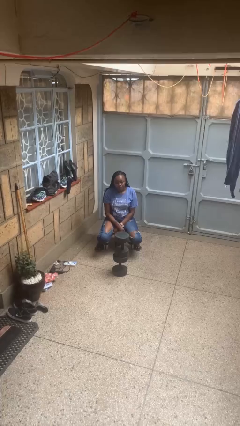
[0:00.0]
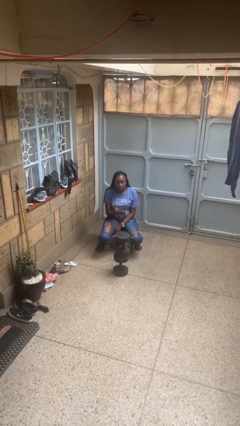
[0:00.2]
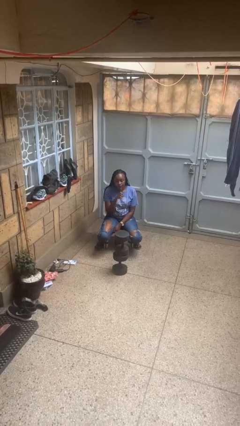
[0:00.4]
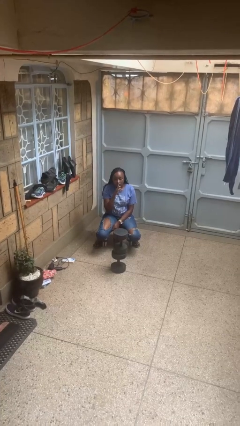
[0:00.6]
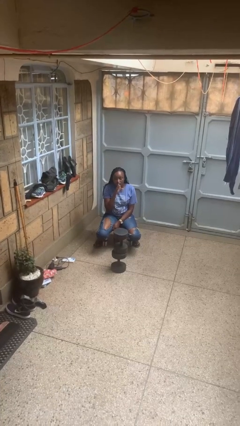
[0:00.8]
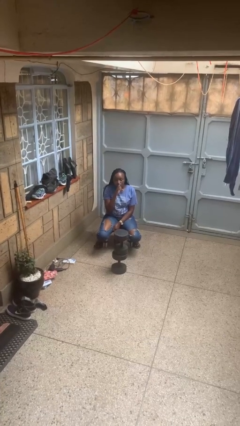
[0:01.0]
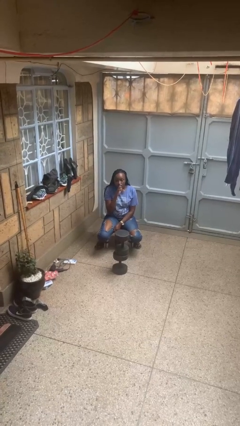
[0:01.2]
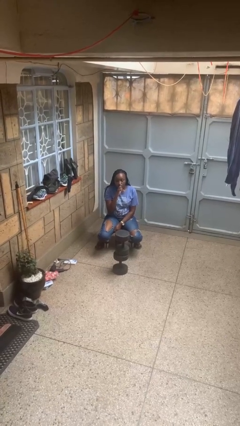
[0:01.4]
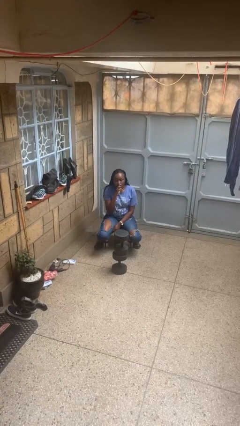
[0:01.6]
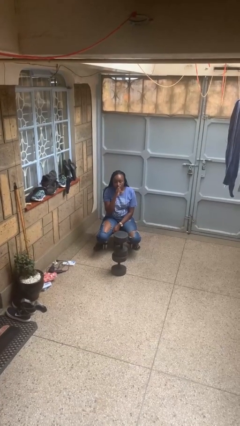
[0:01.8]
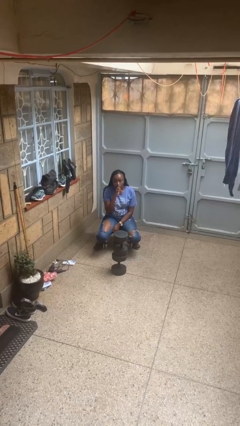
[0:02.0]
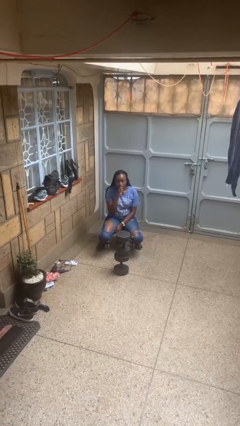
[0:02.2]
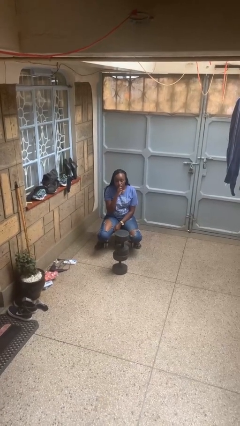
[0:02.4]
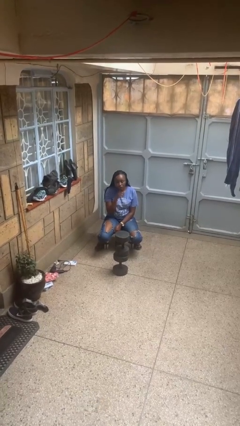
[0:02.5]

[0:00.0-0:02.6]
person gestures be quiet

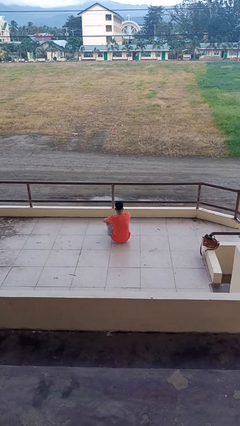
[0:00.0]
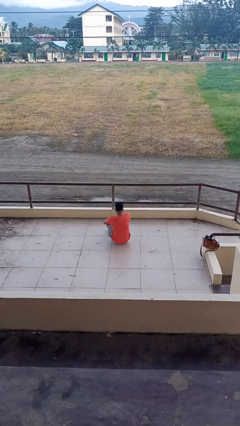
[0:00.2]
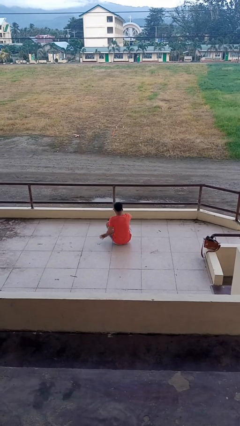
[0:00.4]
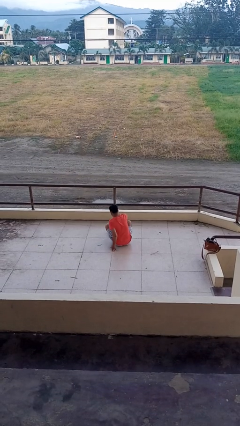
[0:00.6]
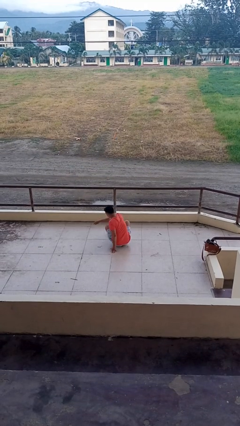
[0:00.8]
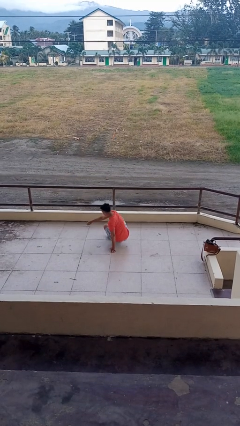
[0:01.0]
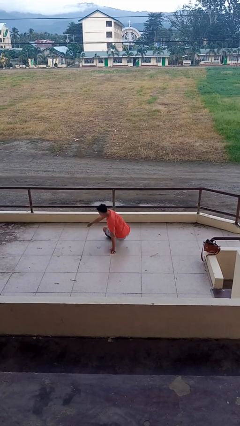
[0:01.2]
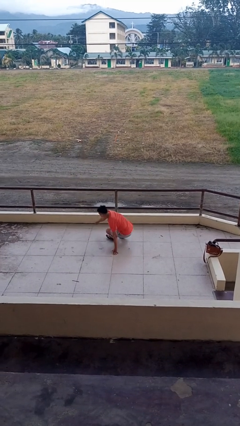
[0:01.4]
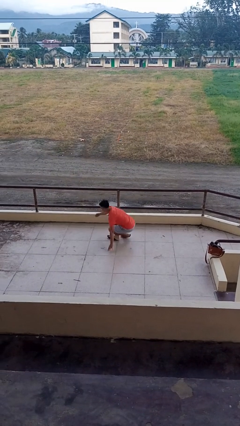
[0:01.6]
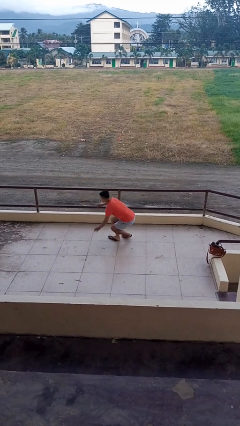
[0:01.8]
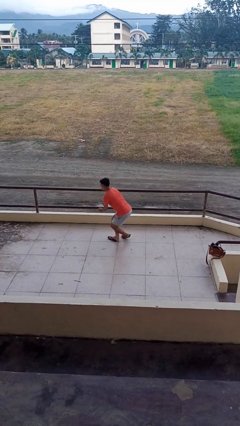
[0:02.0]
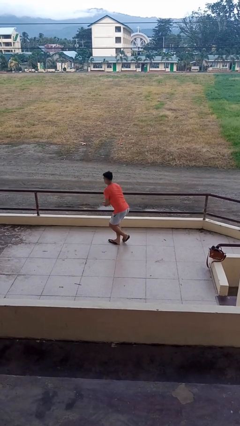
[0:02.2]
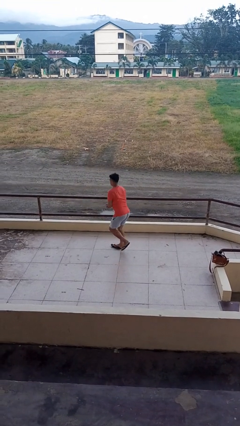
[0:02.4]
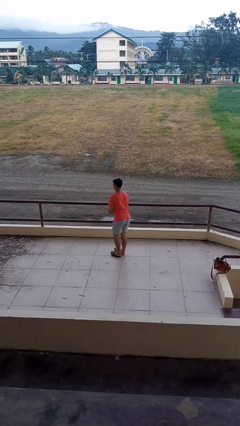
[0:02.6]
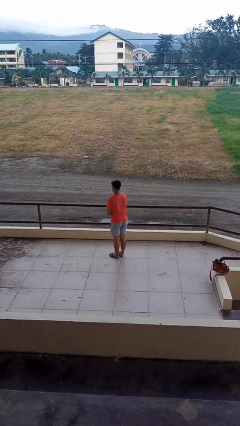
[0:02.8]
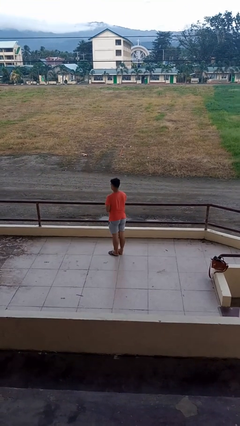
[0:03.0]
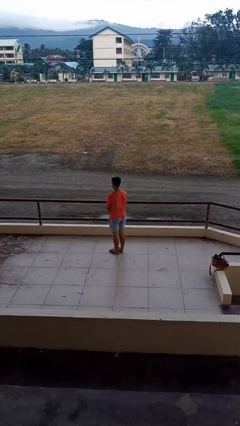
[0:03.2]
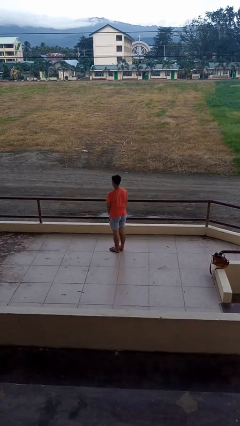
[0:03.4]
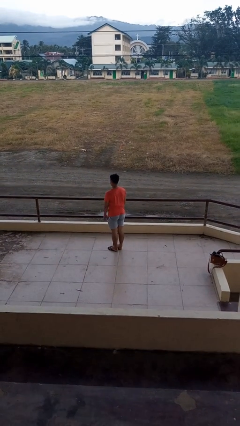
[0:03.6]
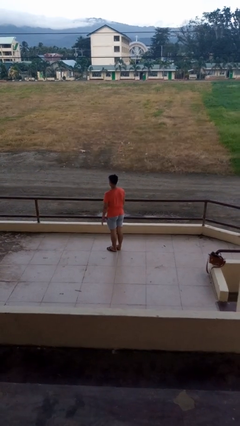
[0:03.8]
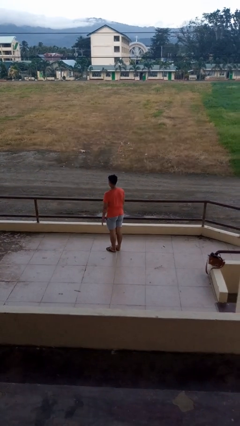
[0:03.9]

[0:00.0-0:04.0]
person stands up from floor

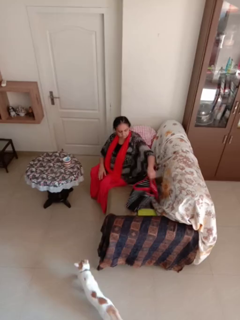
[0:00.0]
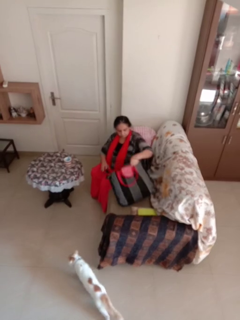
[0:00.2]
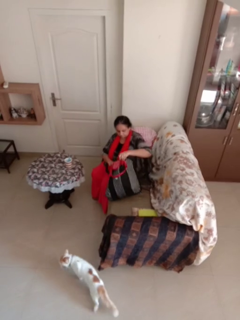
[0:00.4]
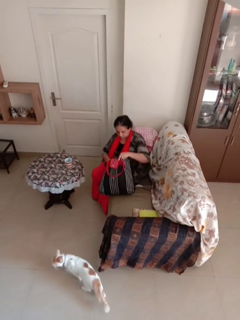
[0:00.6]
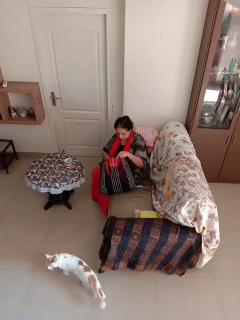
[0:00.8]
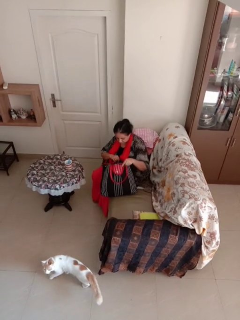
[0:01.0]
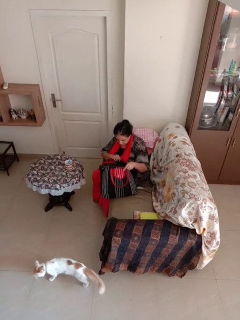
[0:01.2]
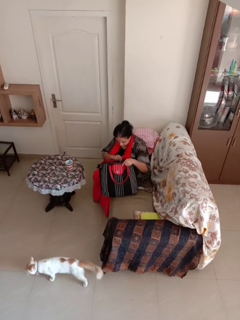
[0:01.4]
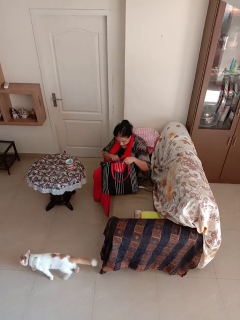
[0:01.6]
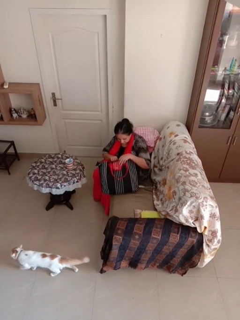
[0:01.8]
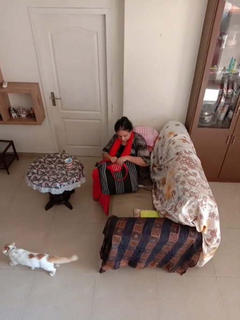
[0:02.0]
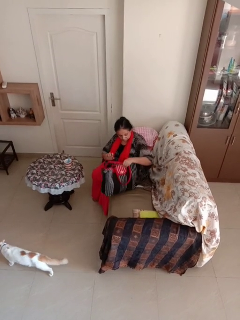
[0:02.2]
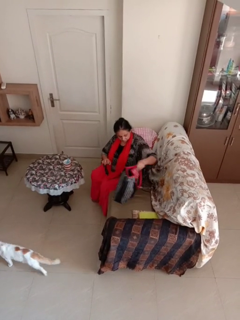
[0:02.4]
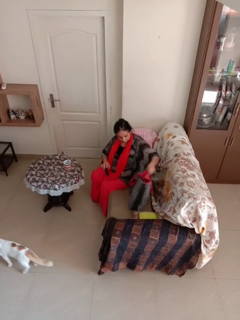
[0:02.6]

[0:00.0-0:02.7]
person searches in bag

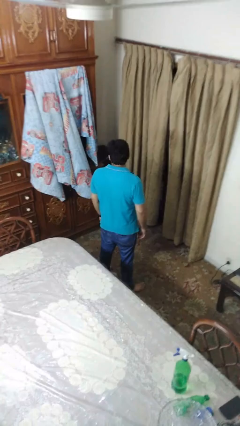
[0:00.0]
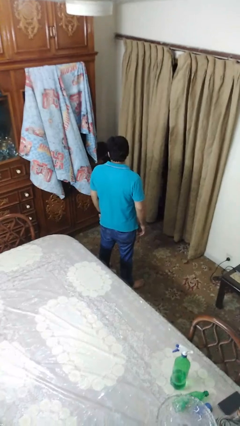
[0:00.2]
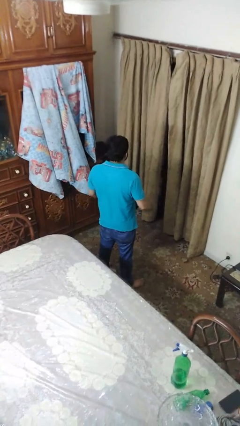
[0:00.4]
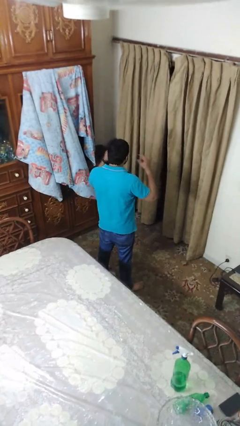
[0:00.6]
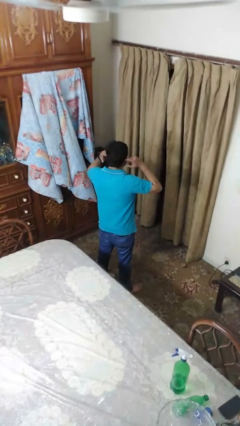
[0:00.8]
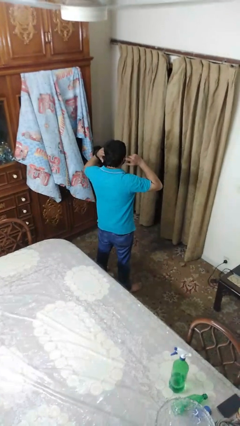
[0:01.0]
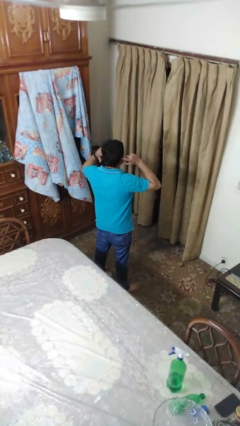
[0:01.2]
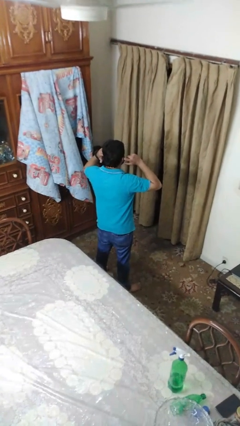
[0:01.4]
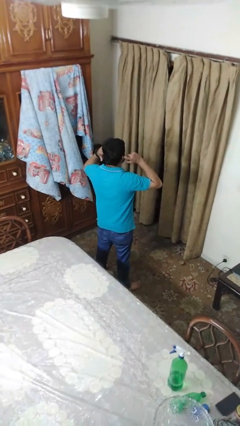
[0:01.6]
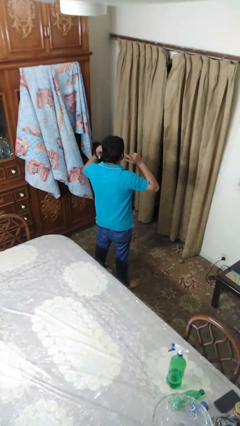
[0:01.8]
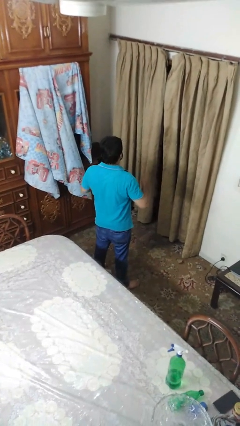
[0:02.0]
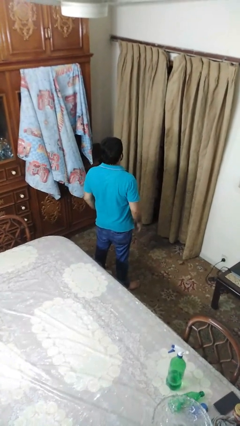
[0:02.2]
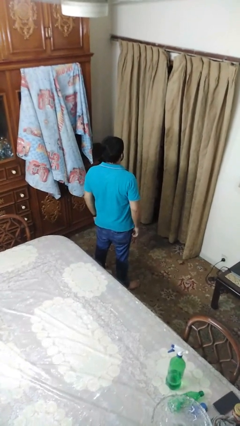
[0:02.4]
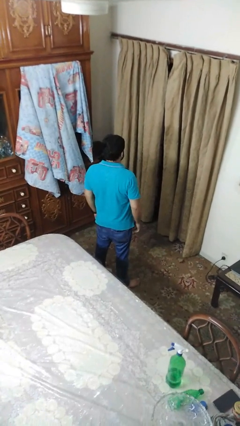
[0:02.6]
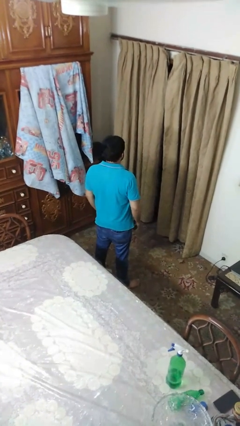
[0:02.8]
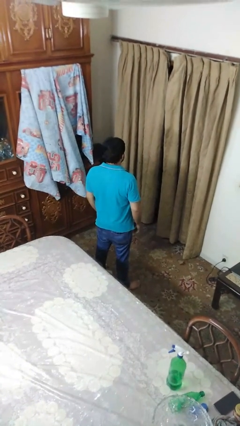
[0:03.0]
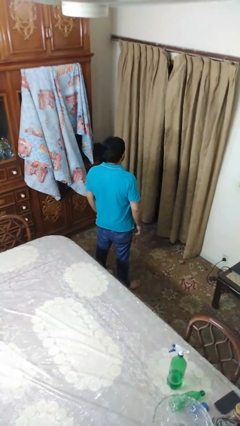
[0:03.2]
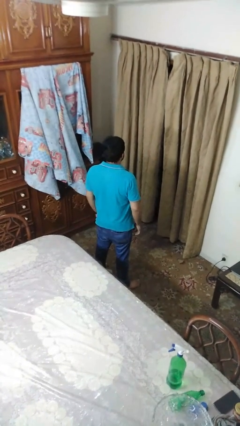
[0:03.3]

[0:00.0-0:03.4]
person puts fingers in ear

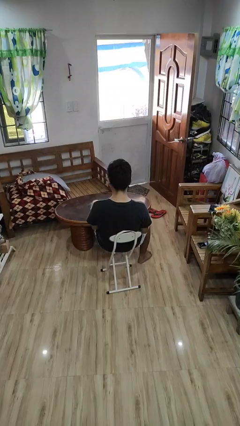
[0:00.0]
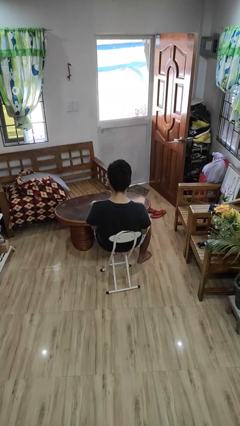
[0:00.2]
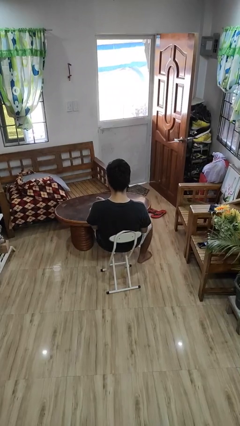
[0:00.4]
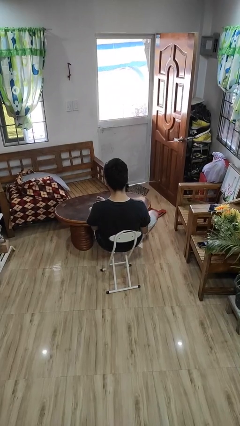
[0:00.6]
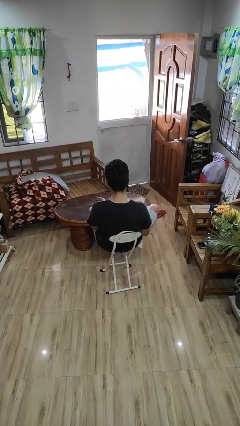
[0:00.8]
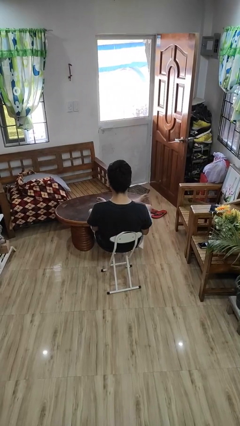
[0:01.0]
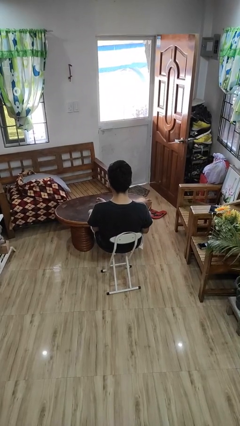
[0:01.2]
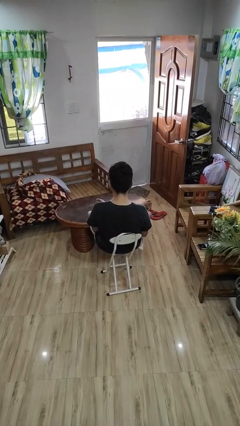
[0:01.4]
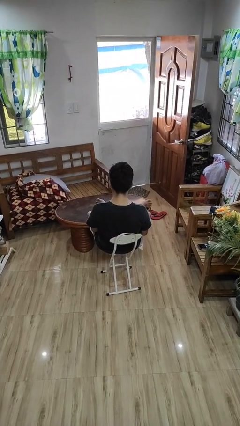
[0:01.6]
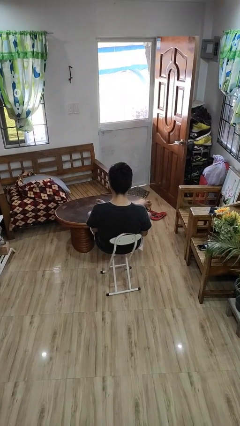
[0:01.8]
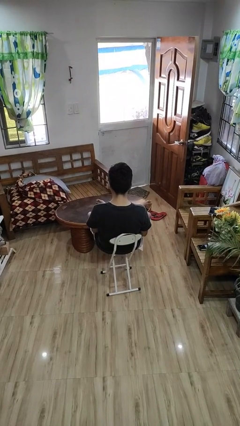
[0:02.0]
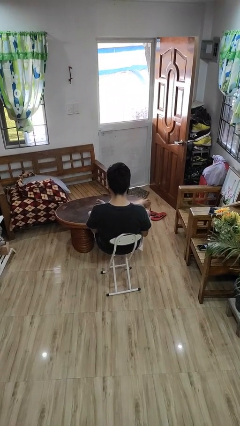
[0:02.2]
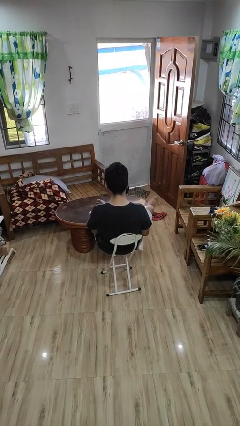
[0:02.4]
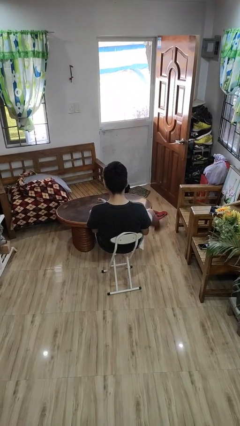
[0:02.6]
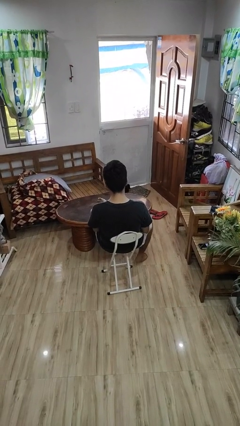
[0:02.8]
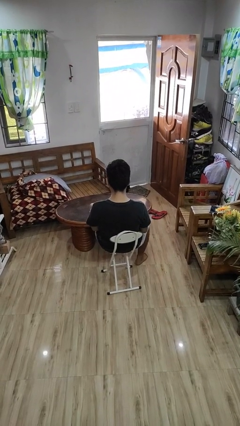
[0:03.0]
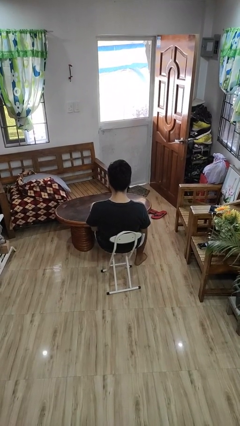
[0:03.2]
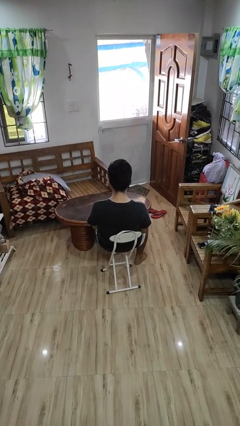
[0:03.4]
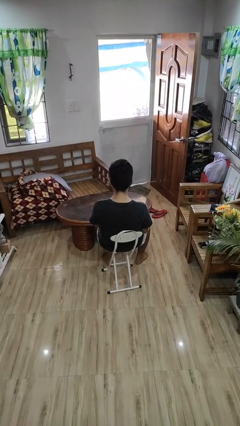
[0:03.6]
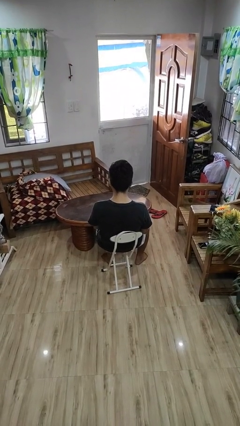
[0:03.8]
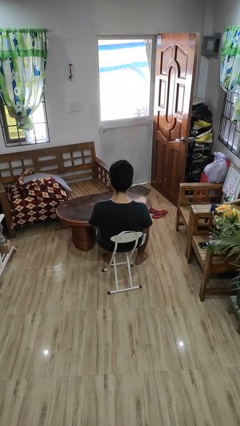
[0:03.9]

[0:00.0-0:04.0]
person puts feet up

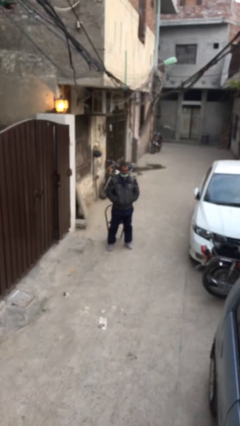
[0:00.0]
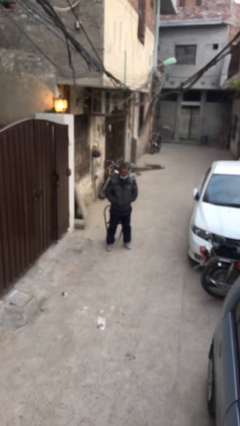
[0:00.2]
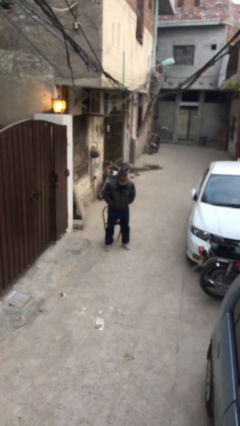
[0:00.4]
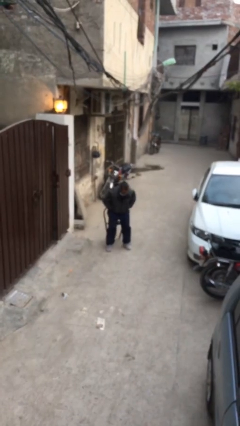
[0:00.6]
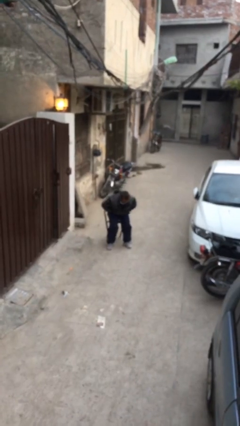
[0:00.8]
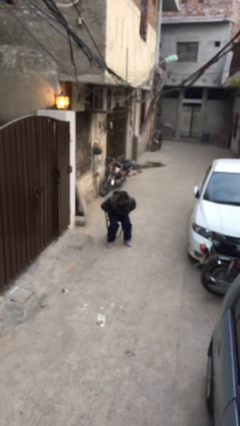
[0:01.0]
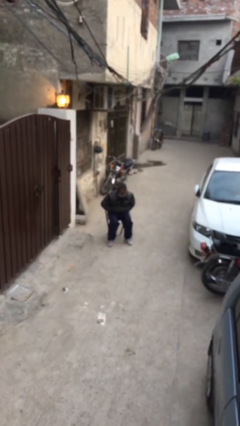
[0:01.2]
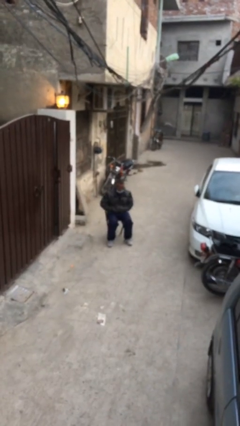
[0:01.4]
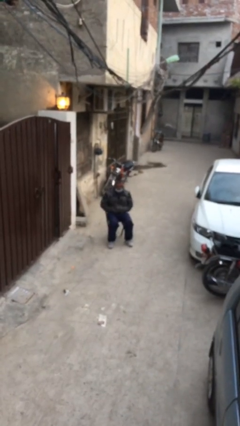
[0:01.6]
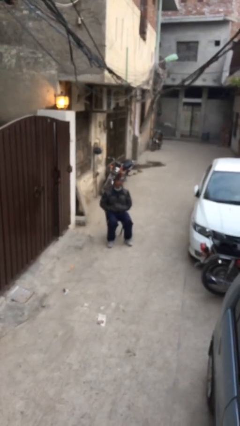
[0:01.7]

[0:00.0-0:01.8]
person sits down
